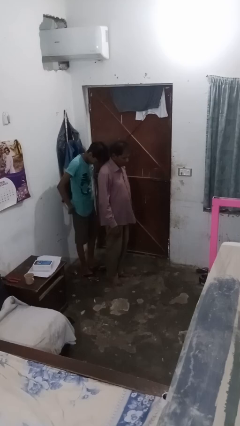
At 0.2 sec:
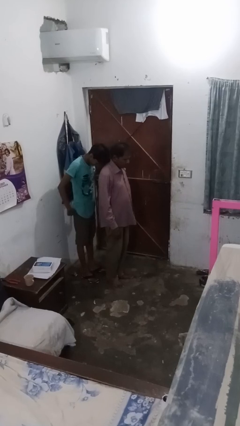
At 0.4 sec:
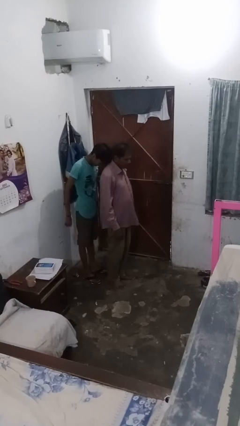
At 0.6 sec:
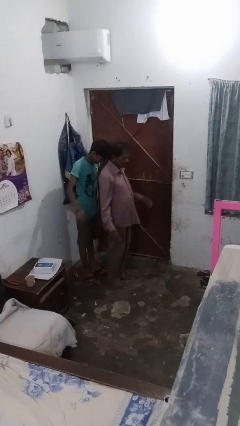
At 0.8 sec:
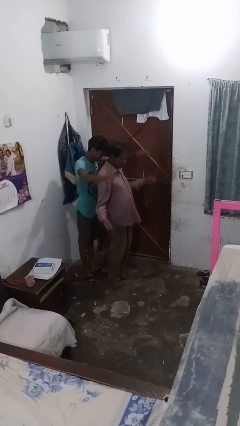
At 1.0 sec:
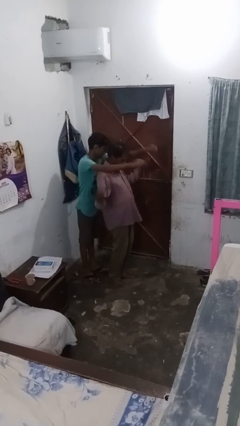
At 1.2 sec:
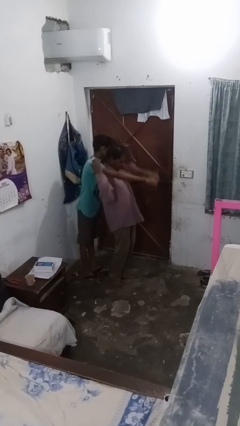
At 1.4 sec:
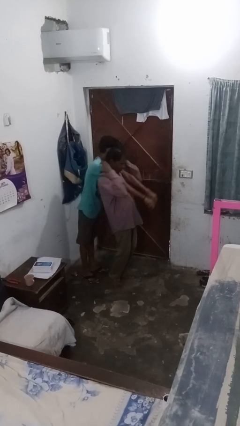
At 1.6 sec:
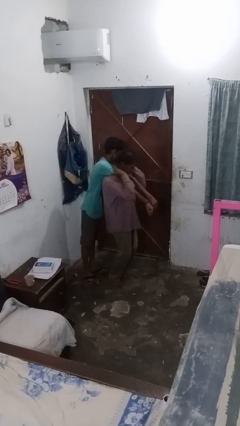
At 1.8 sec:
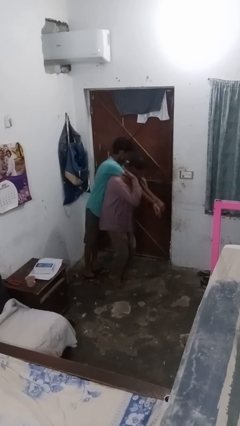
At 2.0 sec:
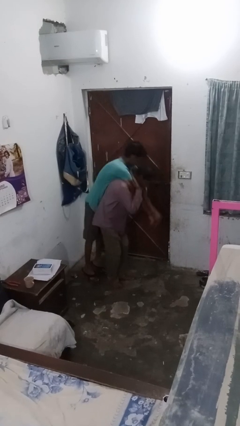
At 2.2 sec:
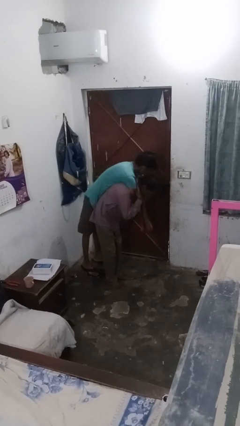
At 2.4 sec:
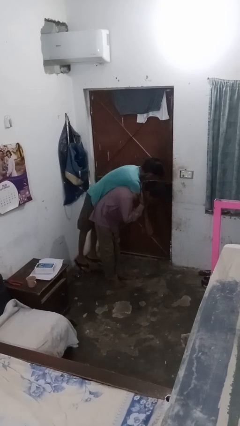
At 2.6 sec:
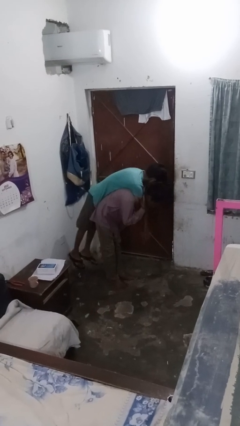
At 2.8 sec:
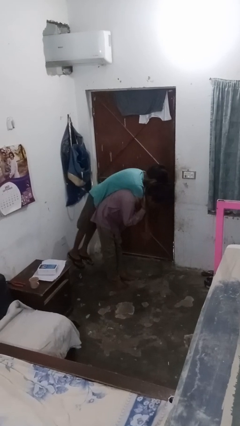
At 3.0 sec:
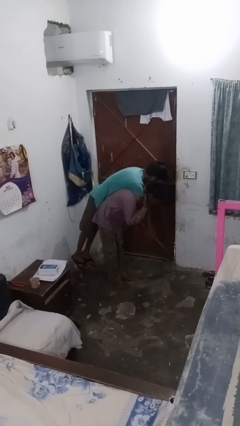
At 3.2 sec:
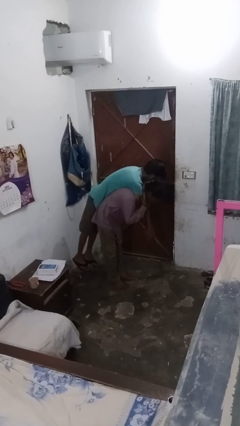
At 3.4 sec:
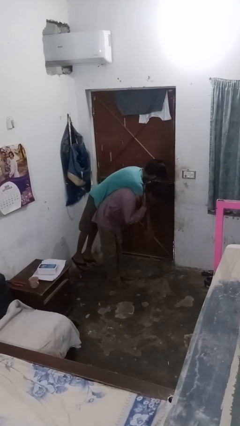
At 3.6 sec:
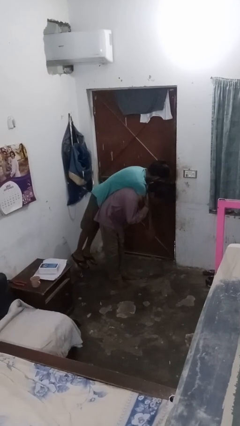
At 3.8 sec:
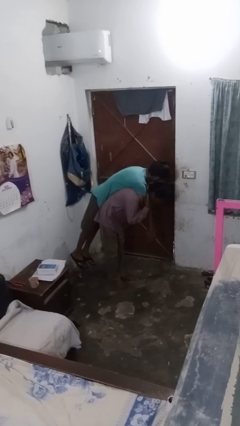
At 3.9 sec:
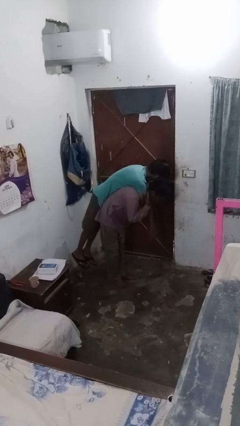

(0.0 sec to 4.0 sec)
person carries person on shoulders

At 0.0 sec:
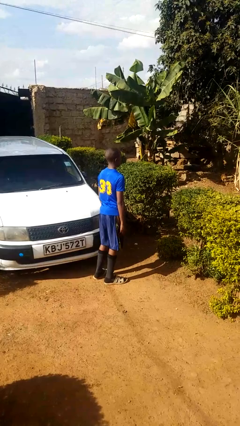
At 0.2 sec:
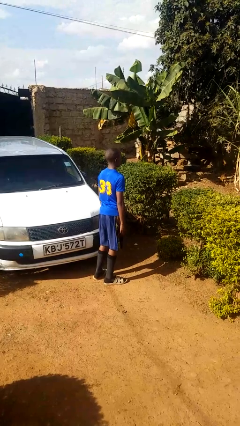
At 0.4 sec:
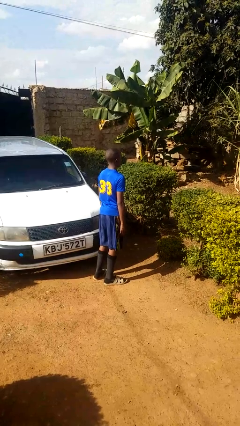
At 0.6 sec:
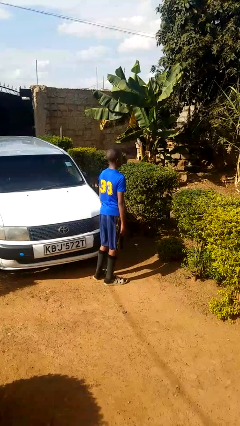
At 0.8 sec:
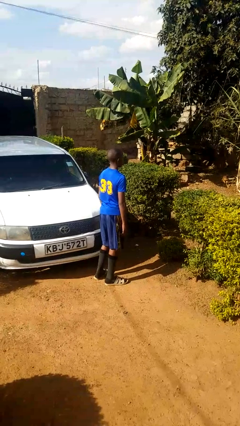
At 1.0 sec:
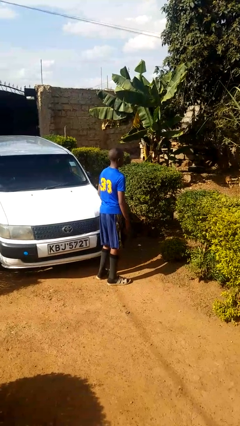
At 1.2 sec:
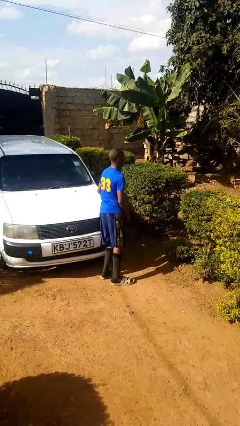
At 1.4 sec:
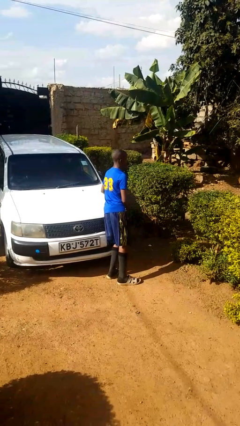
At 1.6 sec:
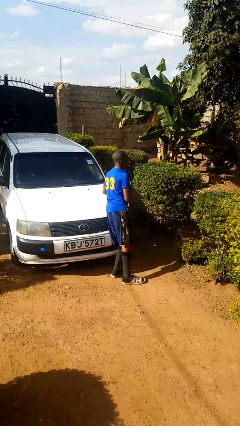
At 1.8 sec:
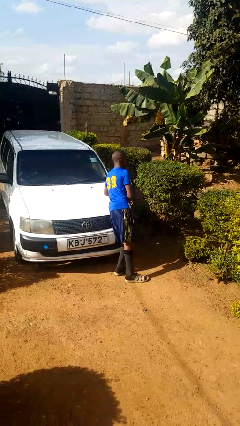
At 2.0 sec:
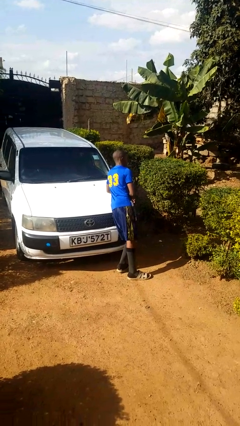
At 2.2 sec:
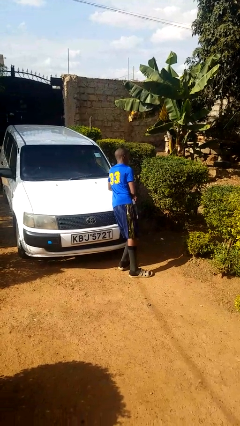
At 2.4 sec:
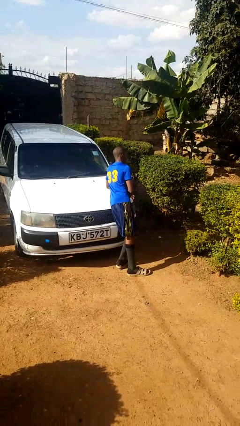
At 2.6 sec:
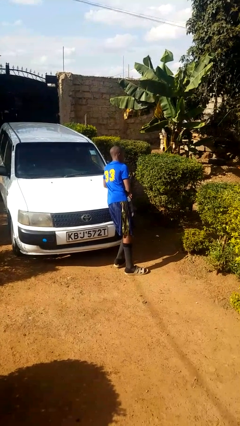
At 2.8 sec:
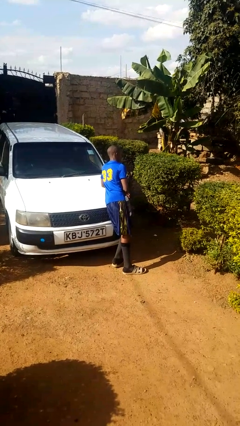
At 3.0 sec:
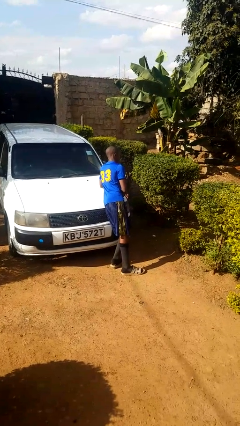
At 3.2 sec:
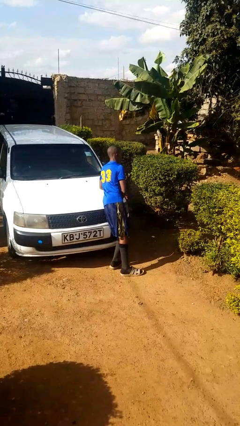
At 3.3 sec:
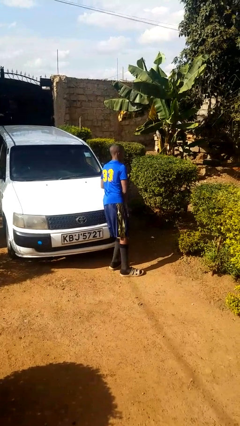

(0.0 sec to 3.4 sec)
person leans against car

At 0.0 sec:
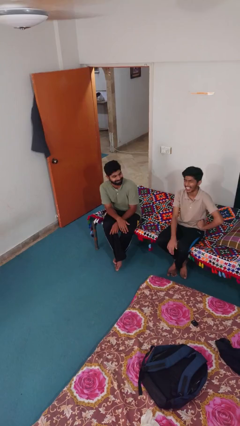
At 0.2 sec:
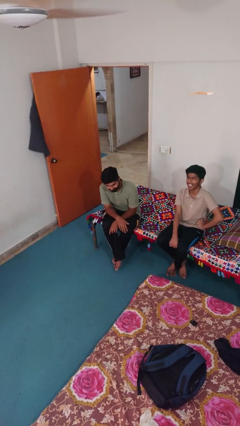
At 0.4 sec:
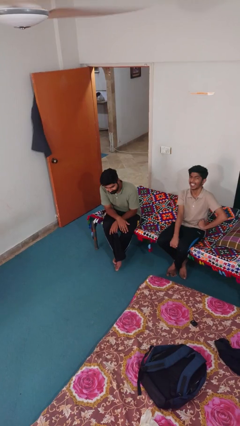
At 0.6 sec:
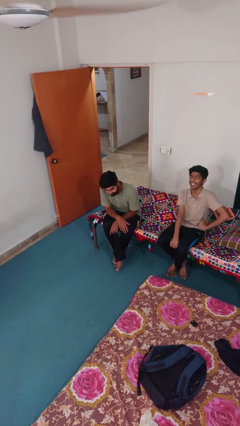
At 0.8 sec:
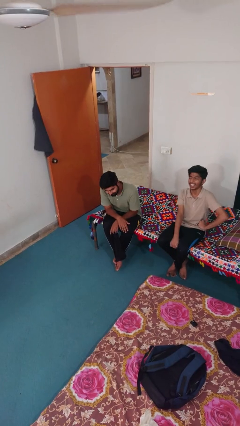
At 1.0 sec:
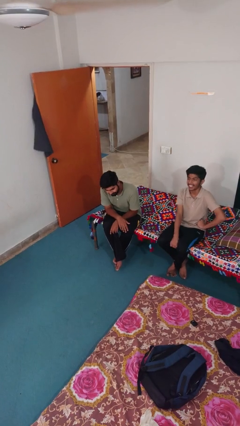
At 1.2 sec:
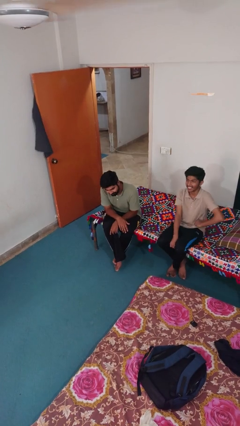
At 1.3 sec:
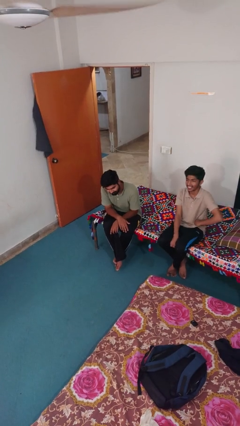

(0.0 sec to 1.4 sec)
person laughs with person

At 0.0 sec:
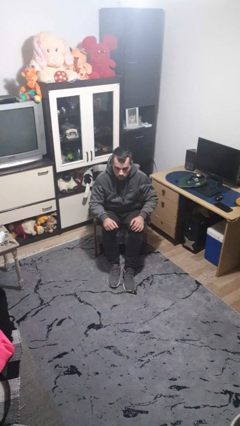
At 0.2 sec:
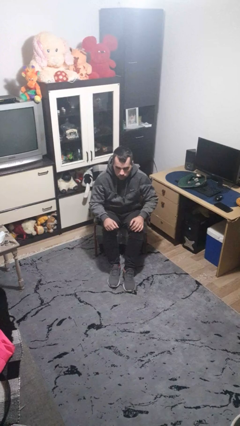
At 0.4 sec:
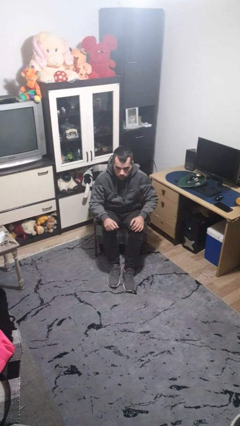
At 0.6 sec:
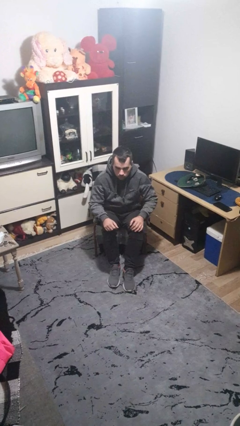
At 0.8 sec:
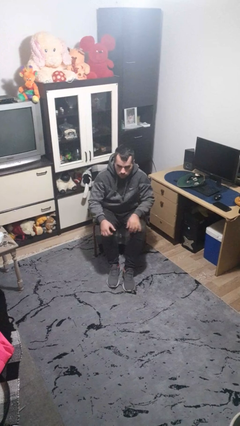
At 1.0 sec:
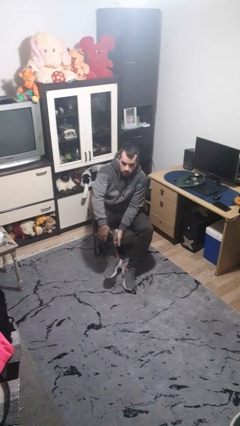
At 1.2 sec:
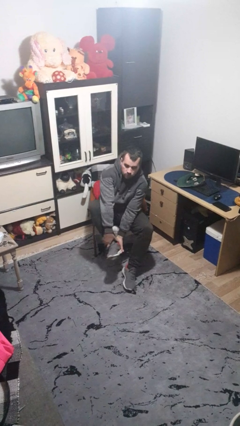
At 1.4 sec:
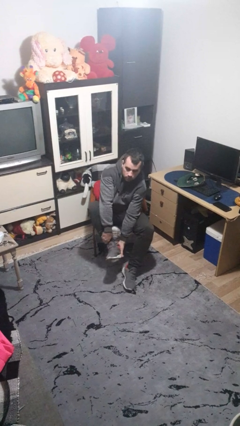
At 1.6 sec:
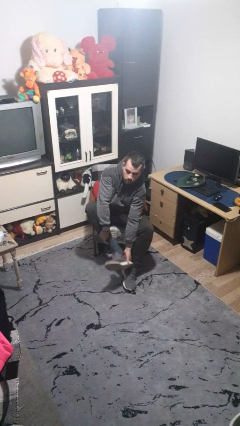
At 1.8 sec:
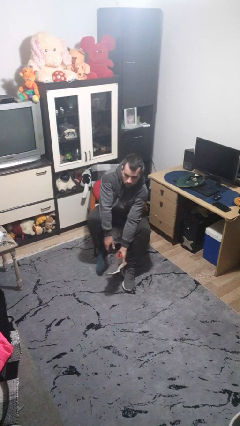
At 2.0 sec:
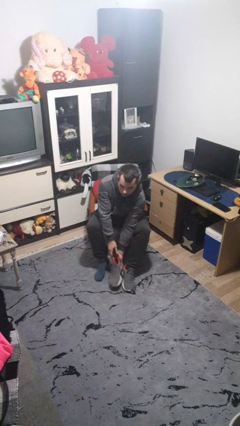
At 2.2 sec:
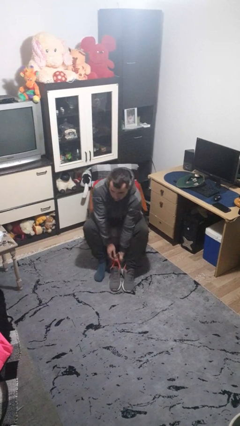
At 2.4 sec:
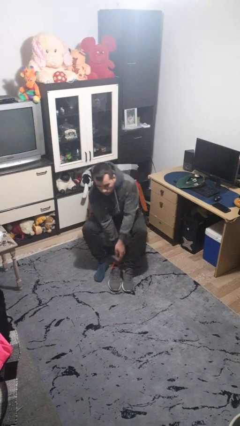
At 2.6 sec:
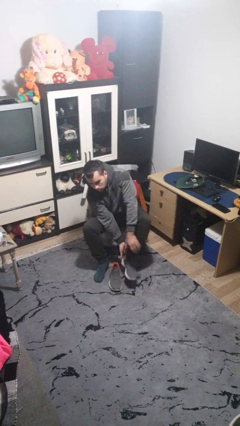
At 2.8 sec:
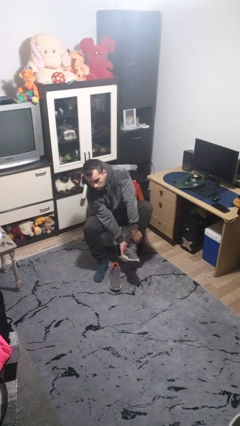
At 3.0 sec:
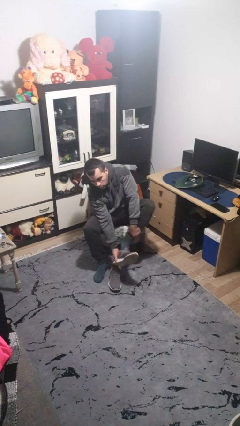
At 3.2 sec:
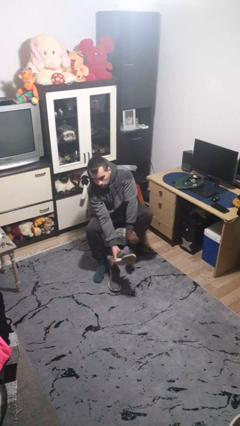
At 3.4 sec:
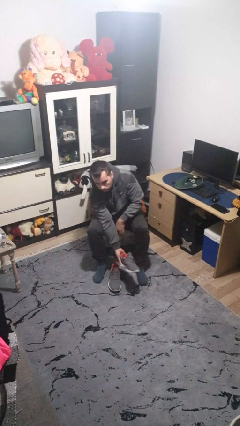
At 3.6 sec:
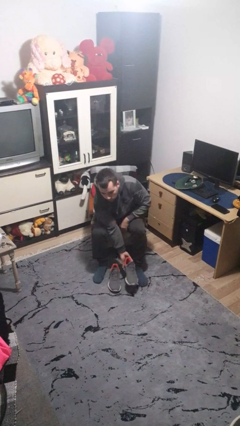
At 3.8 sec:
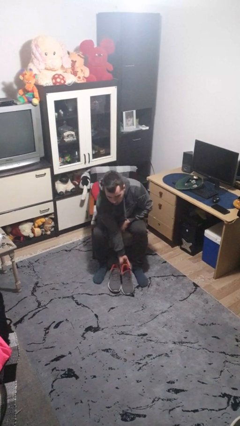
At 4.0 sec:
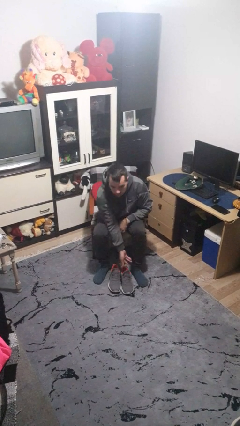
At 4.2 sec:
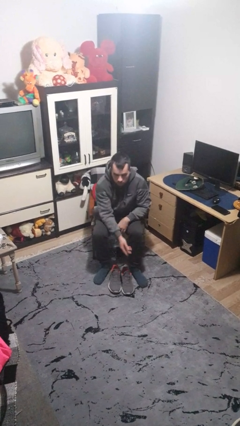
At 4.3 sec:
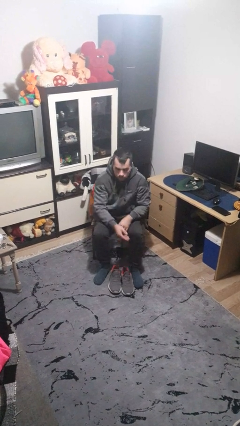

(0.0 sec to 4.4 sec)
person takes off shoes

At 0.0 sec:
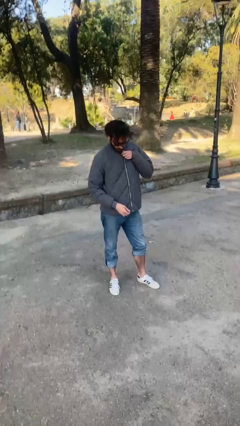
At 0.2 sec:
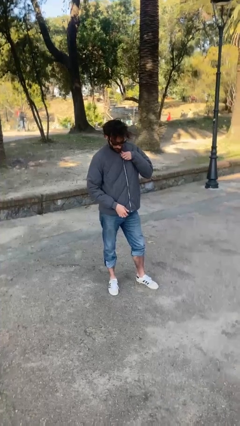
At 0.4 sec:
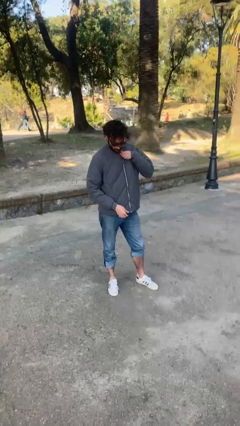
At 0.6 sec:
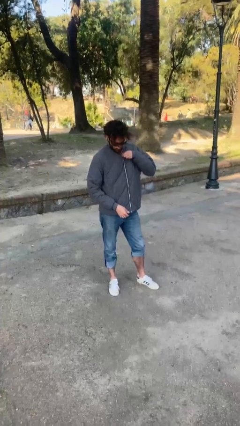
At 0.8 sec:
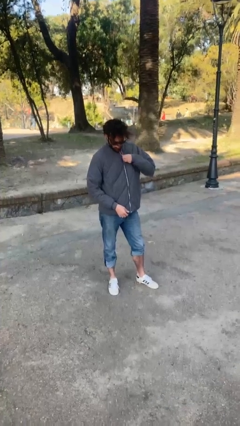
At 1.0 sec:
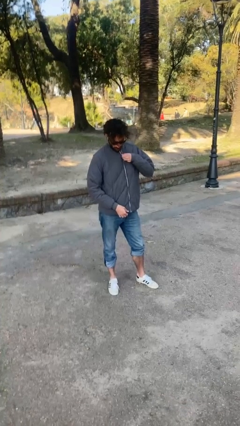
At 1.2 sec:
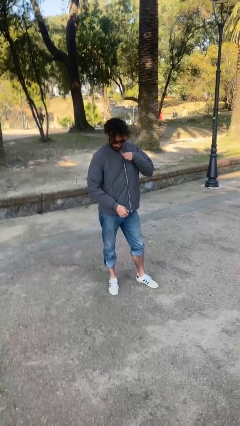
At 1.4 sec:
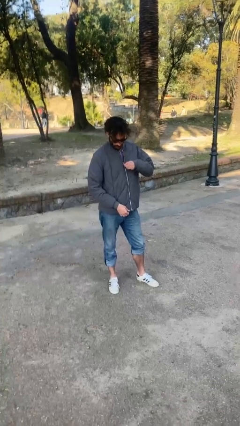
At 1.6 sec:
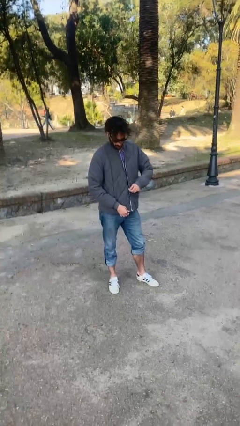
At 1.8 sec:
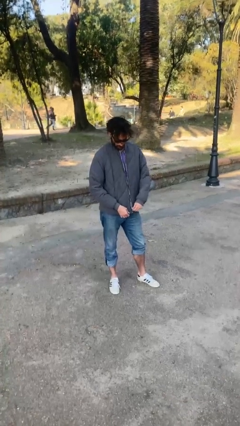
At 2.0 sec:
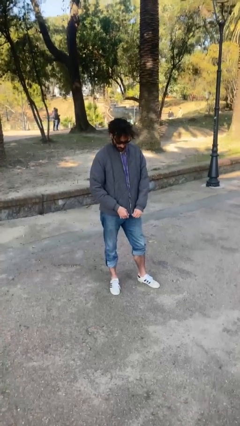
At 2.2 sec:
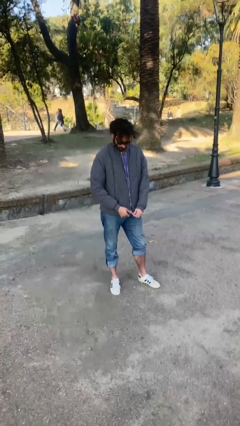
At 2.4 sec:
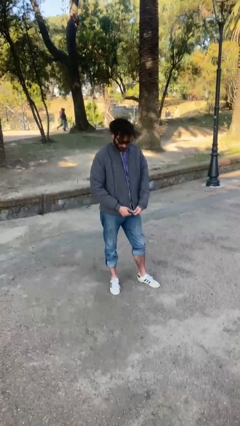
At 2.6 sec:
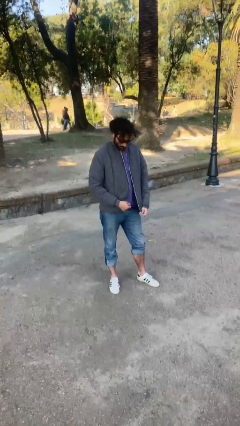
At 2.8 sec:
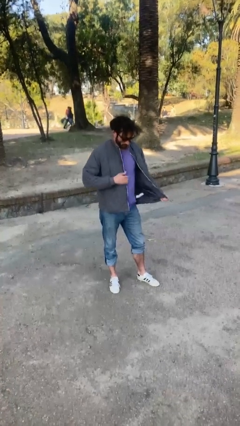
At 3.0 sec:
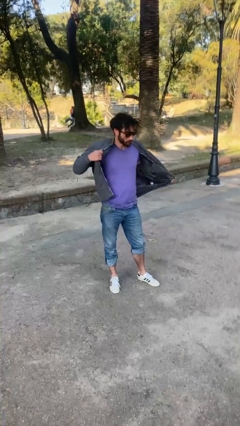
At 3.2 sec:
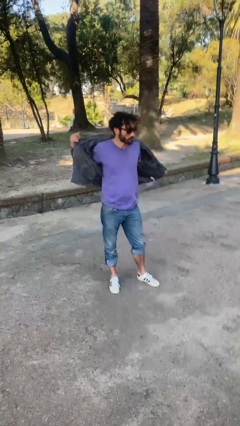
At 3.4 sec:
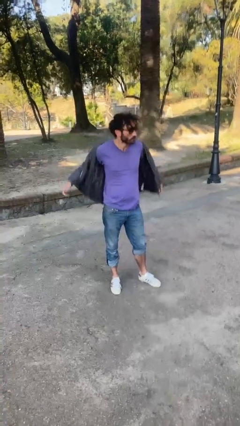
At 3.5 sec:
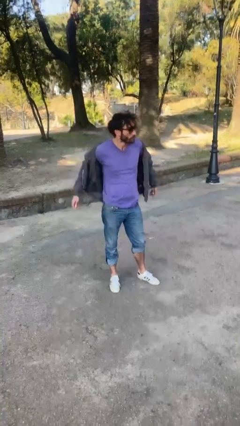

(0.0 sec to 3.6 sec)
person unzips jacket

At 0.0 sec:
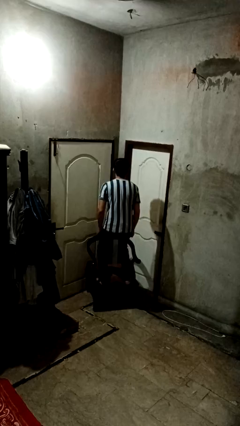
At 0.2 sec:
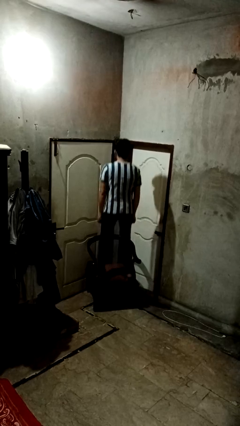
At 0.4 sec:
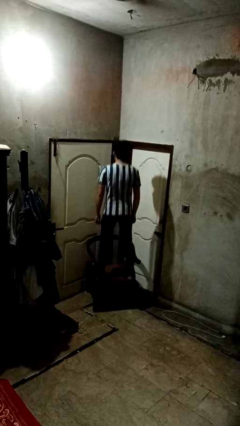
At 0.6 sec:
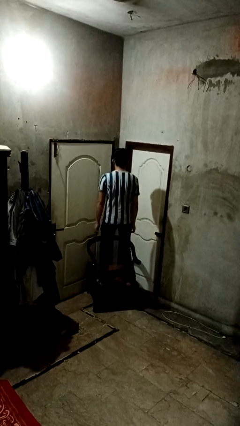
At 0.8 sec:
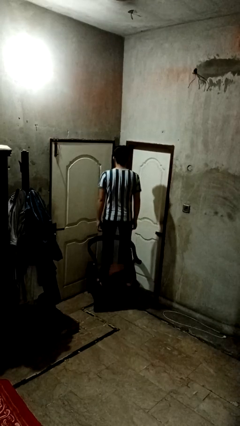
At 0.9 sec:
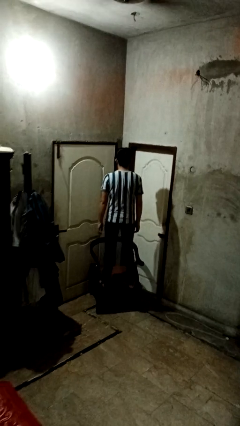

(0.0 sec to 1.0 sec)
person jumps on couch
